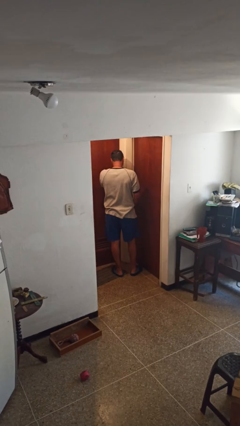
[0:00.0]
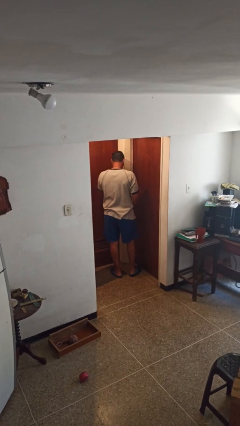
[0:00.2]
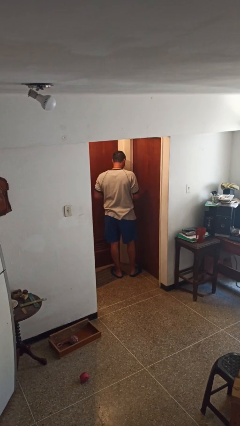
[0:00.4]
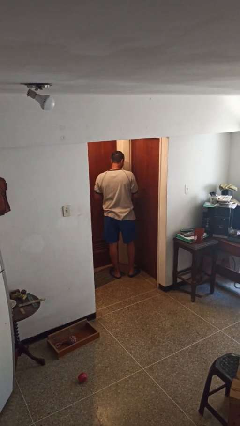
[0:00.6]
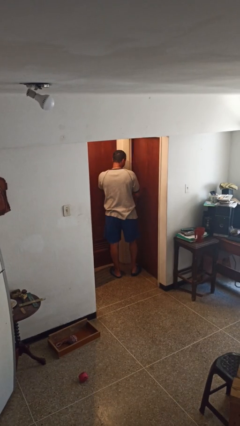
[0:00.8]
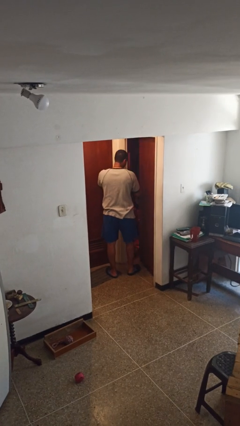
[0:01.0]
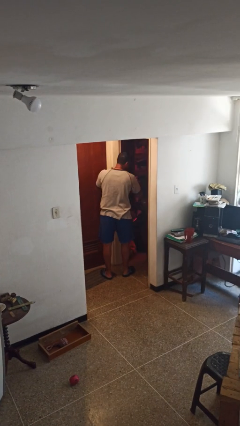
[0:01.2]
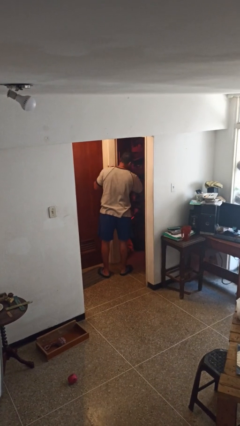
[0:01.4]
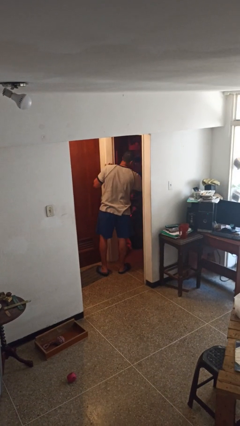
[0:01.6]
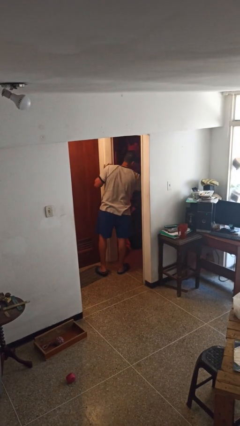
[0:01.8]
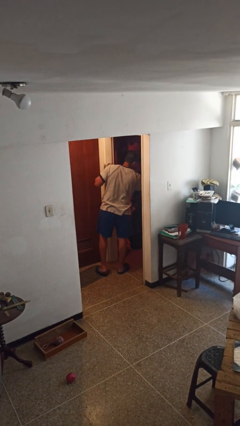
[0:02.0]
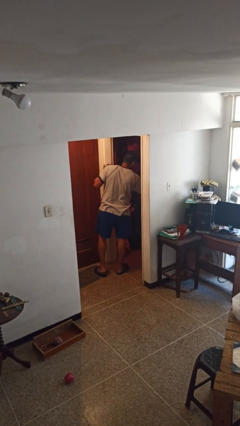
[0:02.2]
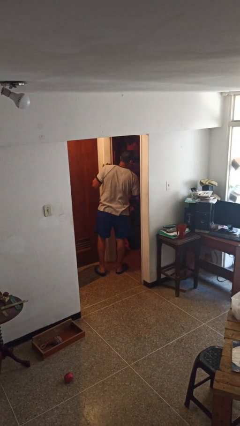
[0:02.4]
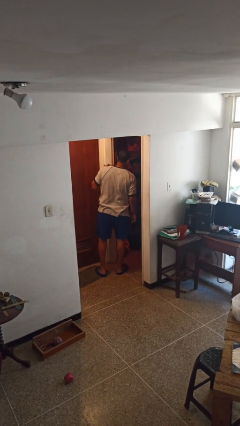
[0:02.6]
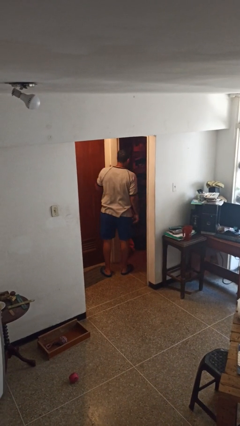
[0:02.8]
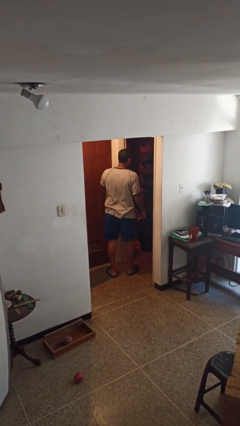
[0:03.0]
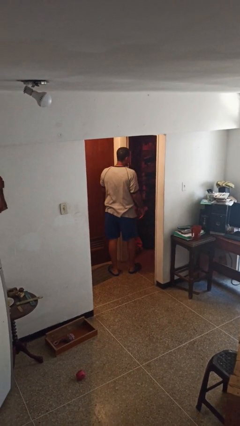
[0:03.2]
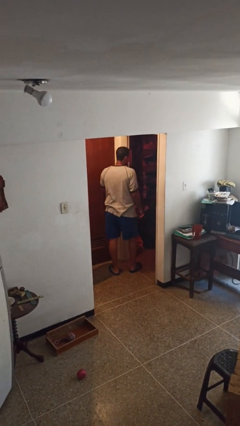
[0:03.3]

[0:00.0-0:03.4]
person opens facility door

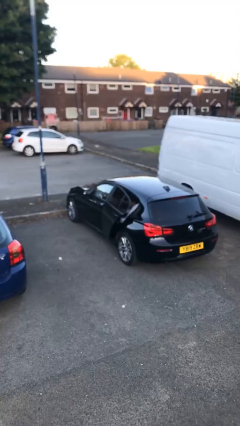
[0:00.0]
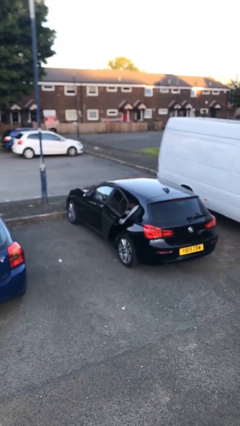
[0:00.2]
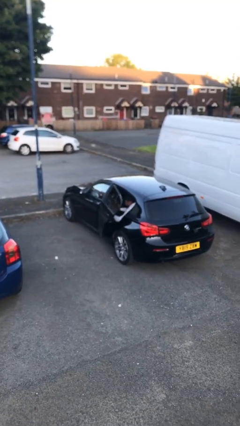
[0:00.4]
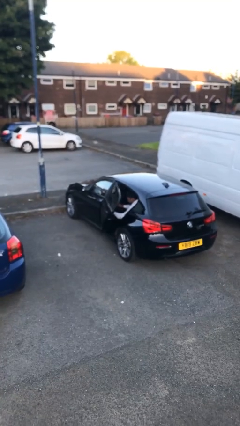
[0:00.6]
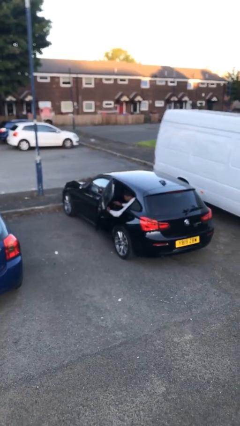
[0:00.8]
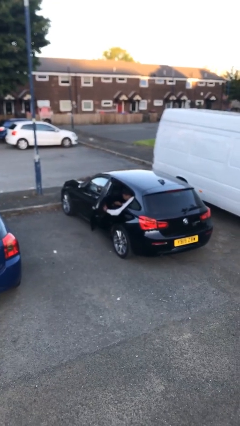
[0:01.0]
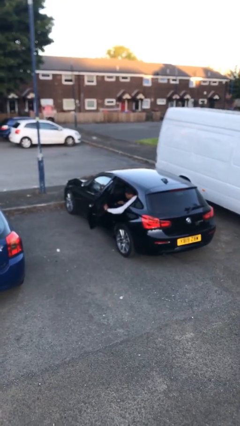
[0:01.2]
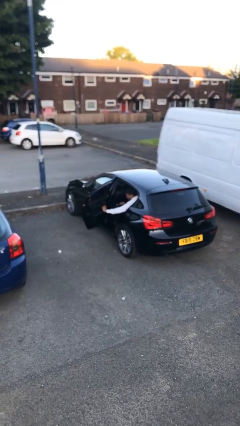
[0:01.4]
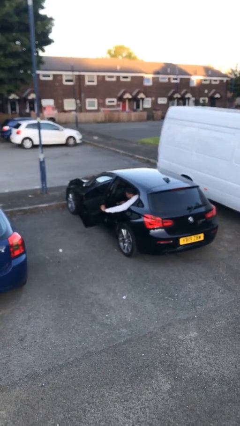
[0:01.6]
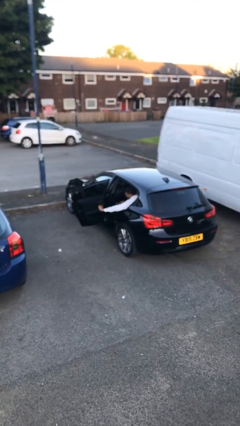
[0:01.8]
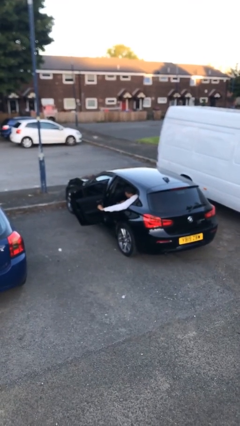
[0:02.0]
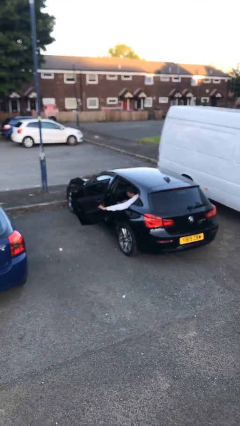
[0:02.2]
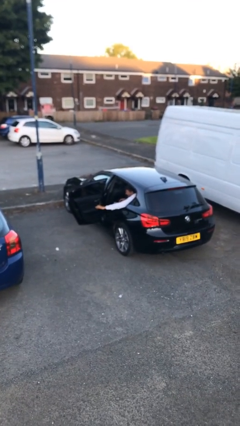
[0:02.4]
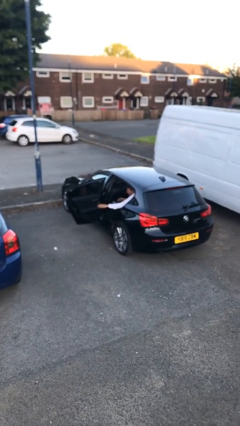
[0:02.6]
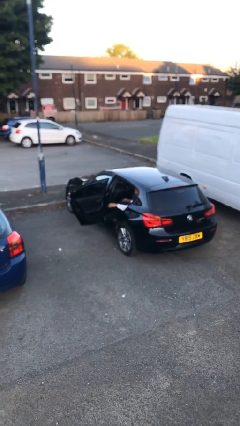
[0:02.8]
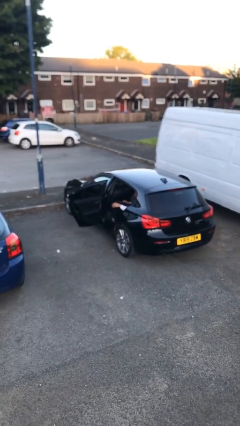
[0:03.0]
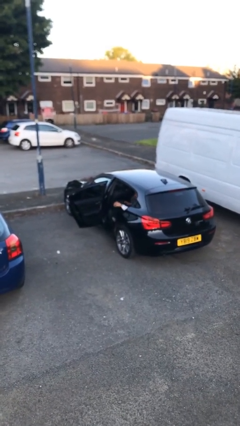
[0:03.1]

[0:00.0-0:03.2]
person opens car door

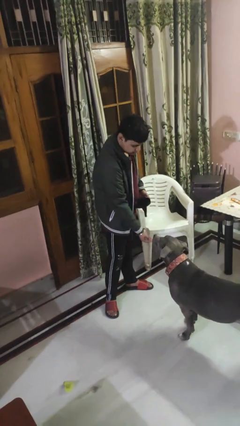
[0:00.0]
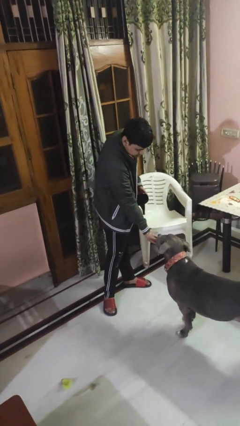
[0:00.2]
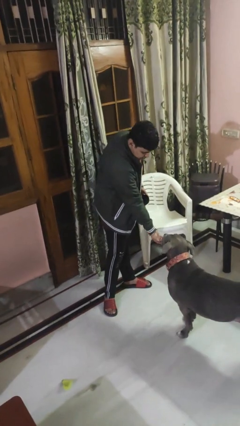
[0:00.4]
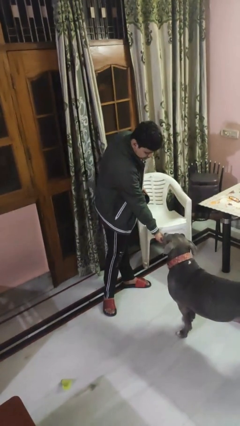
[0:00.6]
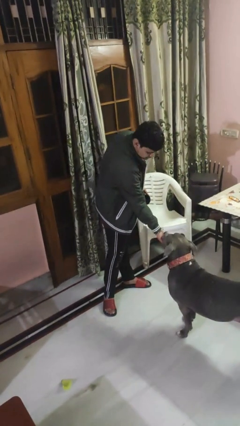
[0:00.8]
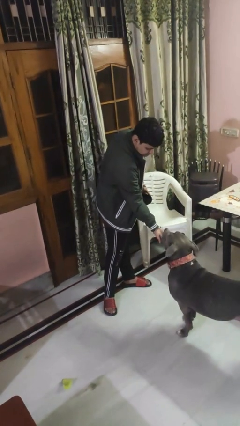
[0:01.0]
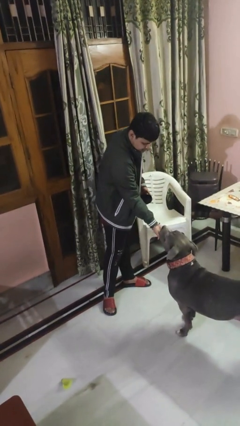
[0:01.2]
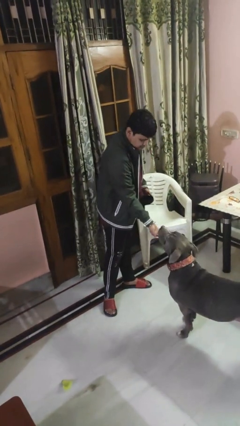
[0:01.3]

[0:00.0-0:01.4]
person feeds dog

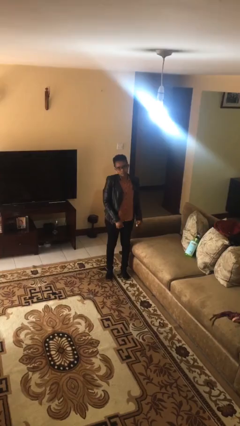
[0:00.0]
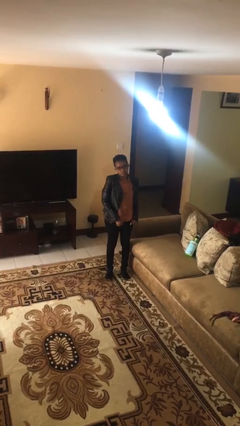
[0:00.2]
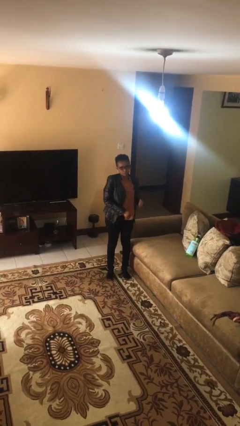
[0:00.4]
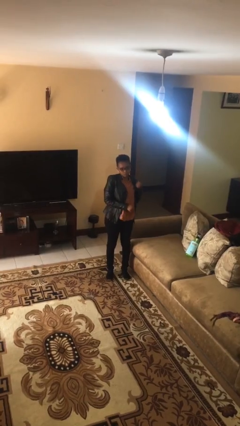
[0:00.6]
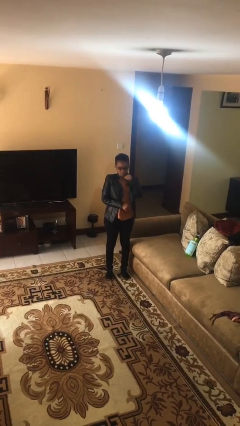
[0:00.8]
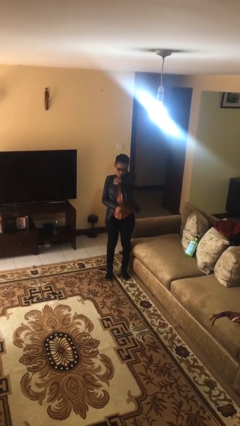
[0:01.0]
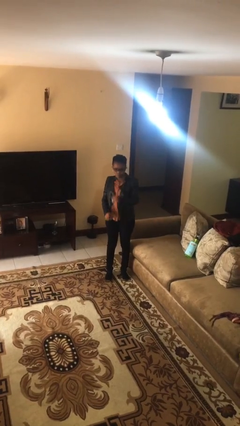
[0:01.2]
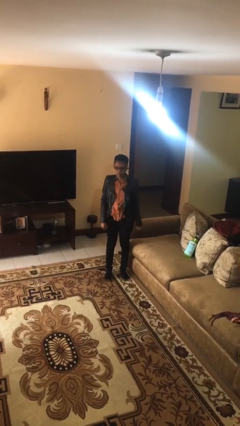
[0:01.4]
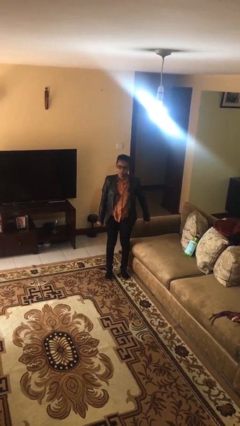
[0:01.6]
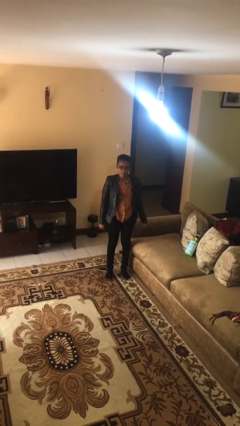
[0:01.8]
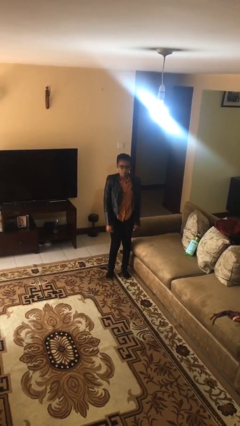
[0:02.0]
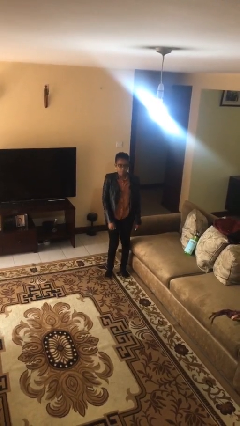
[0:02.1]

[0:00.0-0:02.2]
person punches

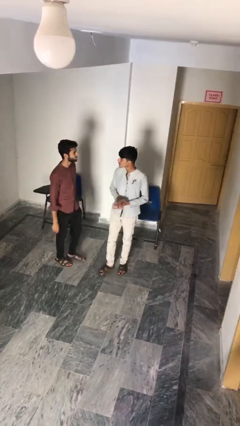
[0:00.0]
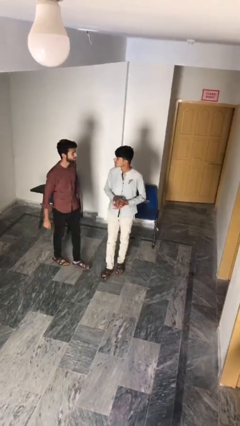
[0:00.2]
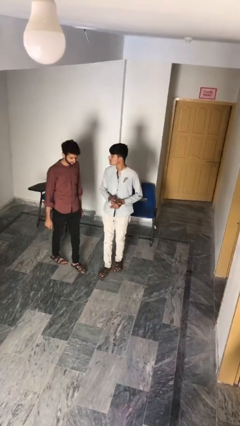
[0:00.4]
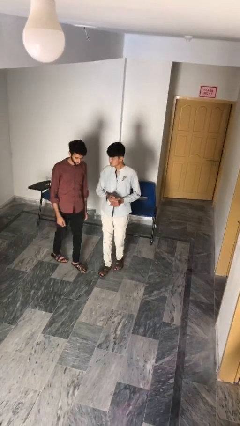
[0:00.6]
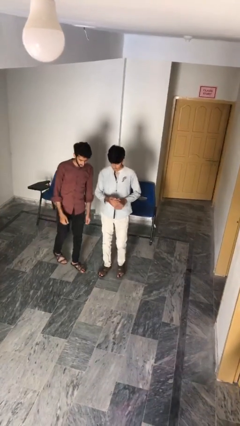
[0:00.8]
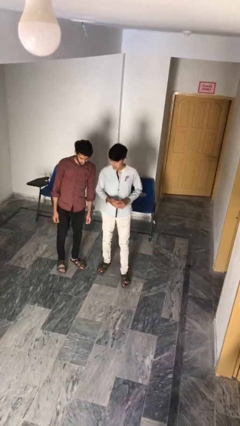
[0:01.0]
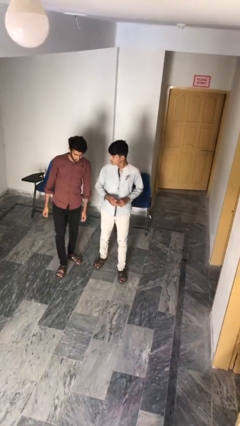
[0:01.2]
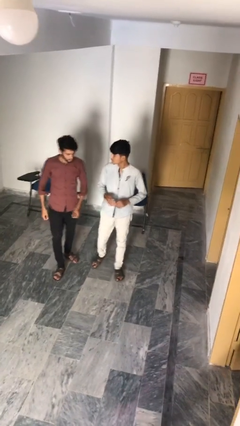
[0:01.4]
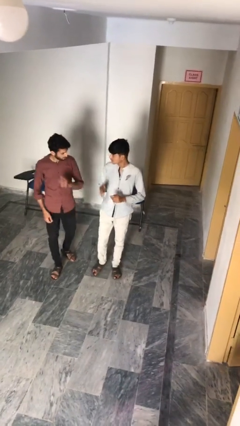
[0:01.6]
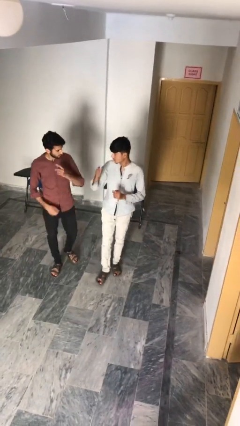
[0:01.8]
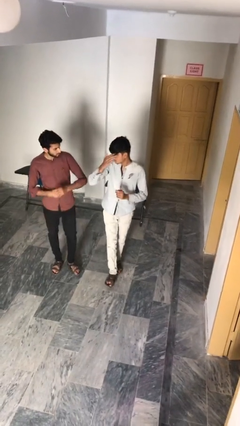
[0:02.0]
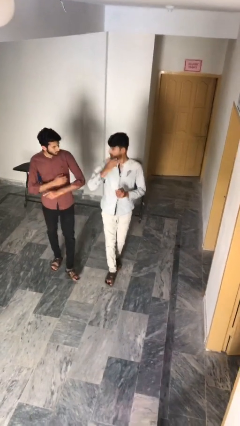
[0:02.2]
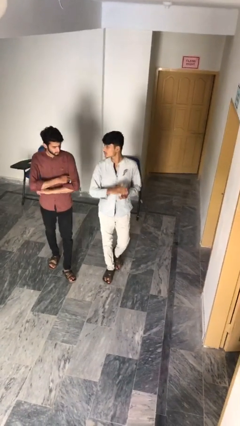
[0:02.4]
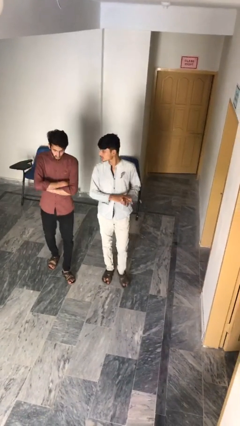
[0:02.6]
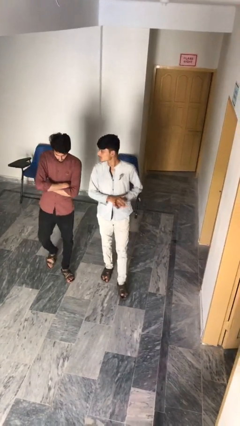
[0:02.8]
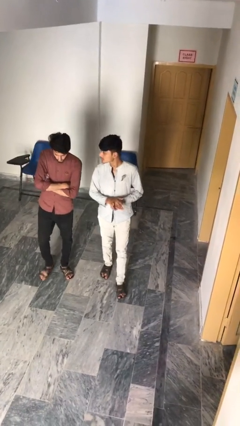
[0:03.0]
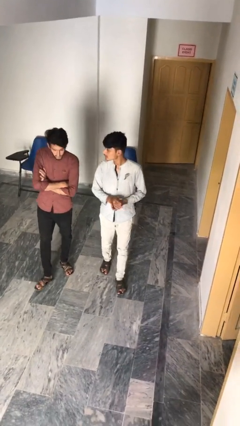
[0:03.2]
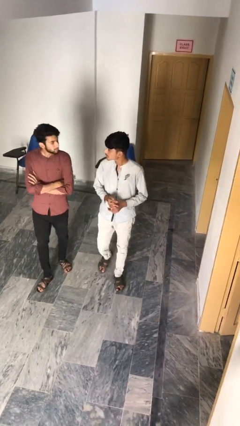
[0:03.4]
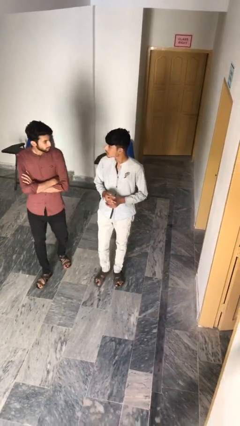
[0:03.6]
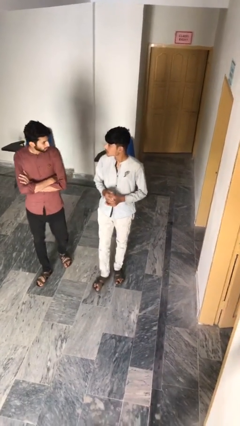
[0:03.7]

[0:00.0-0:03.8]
person talks to person

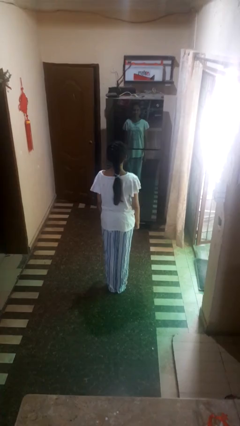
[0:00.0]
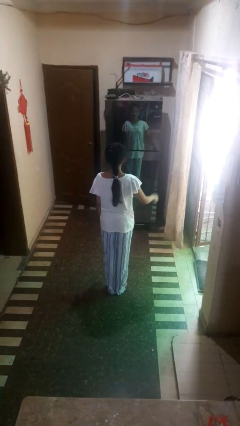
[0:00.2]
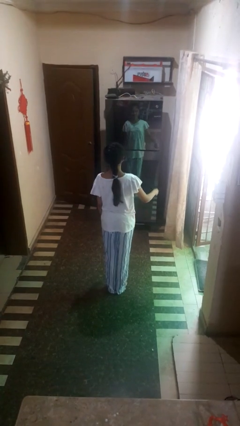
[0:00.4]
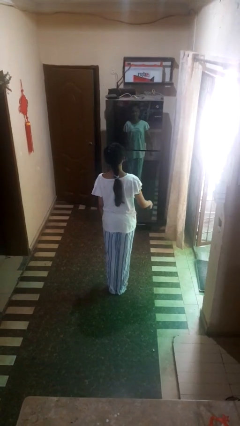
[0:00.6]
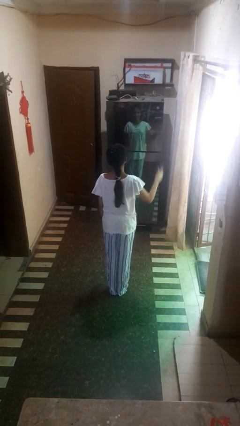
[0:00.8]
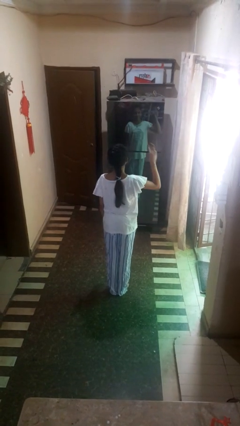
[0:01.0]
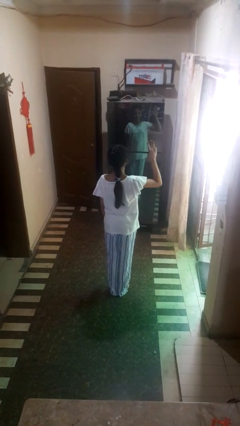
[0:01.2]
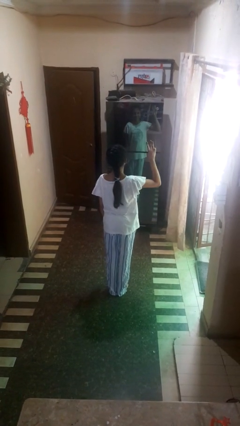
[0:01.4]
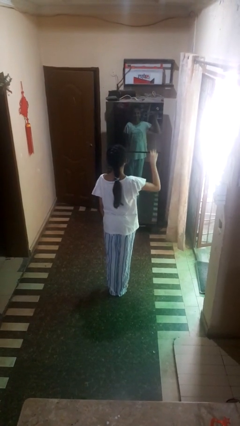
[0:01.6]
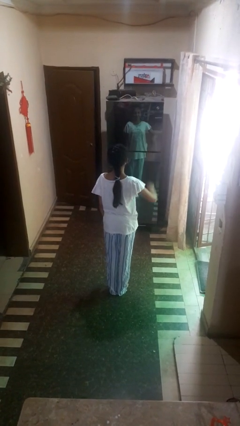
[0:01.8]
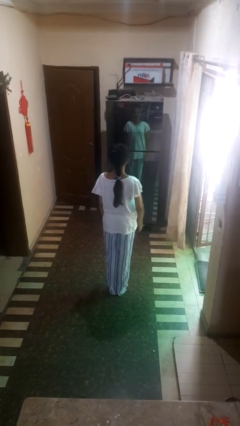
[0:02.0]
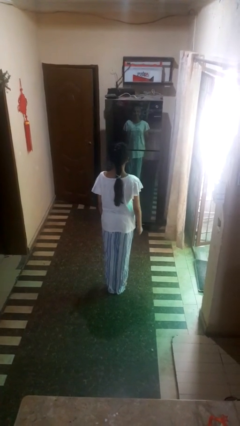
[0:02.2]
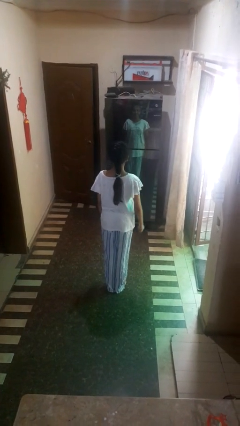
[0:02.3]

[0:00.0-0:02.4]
person gestures number three

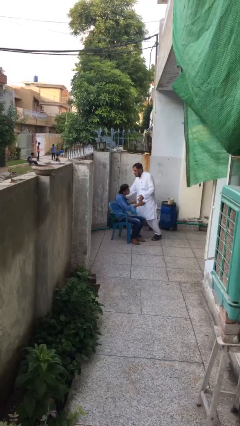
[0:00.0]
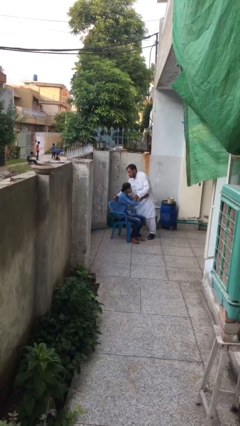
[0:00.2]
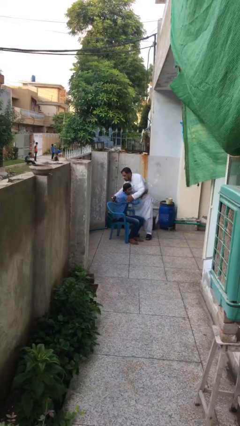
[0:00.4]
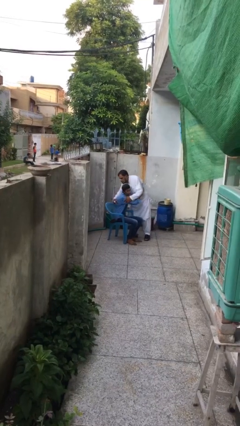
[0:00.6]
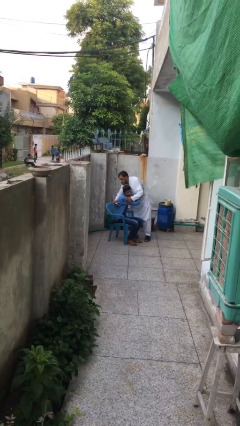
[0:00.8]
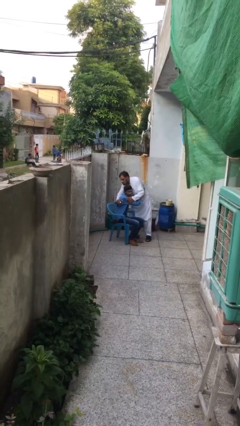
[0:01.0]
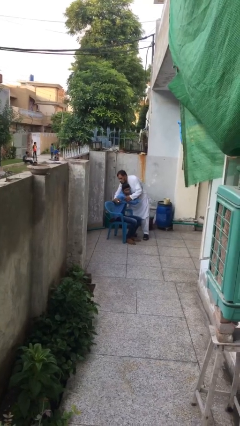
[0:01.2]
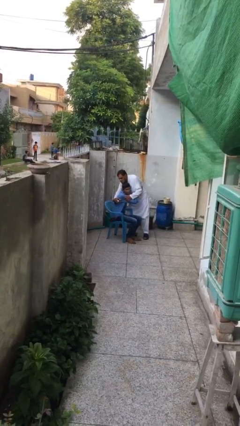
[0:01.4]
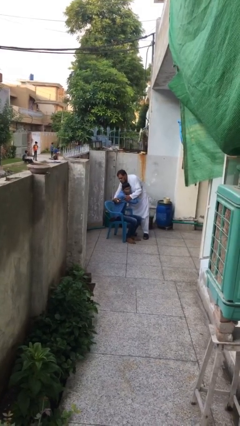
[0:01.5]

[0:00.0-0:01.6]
person embraces person
